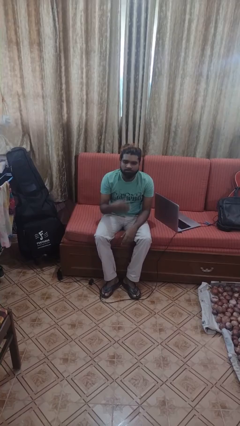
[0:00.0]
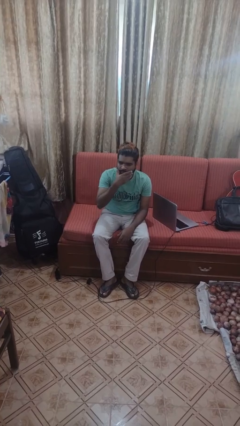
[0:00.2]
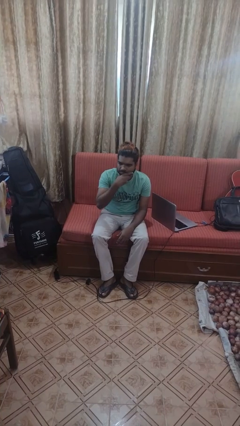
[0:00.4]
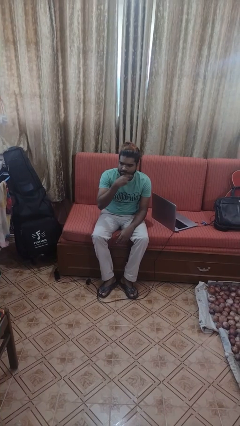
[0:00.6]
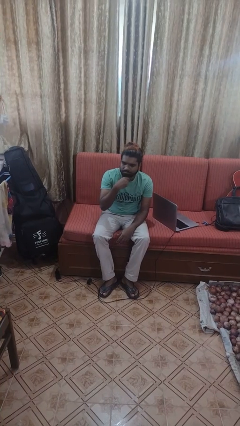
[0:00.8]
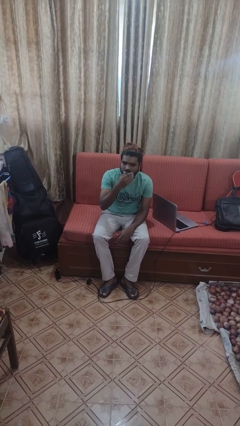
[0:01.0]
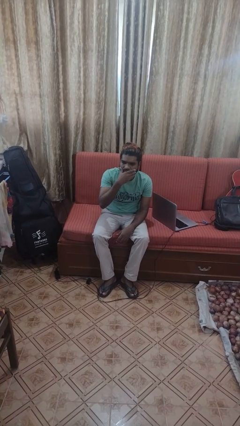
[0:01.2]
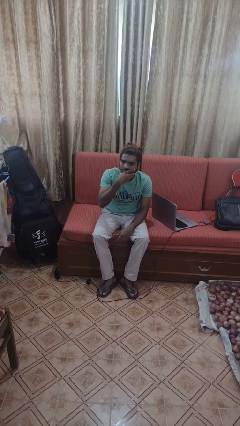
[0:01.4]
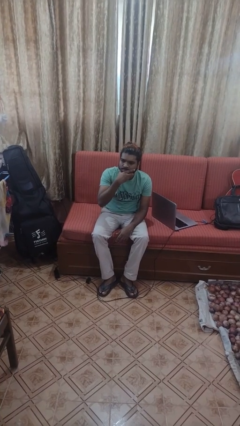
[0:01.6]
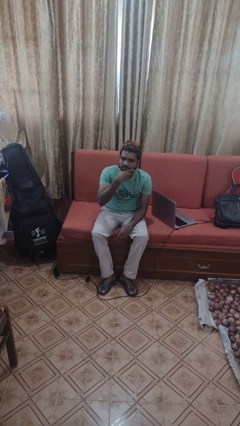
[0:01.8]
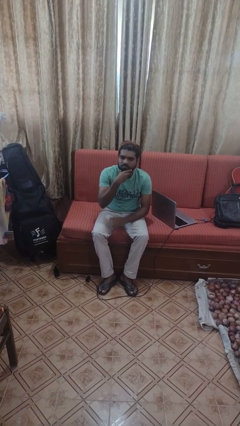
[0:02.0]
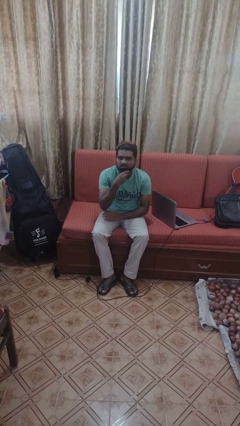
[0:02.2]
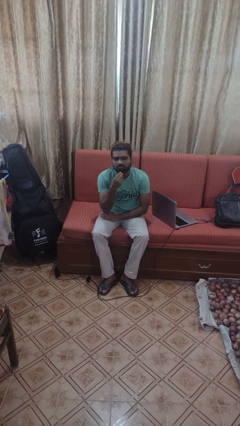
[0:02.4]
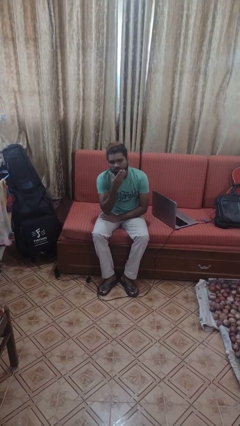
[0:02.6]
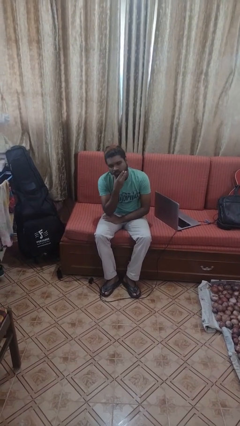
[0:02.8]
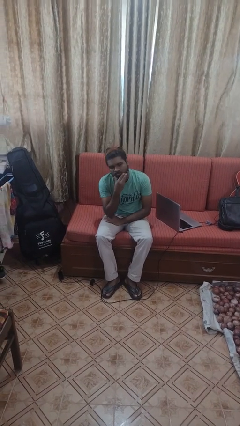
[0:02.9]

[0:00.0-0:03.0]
person strokes chin

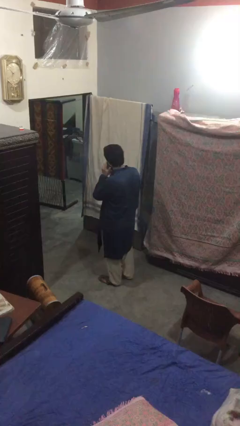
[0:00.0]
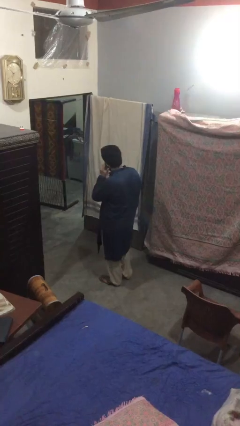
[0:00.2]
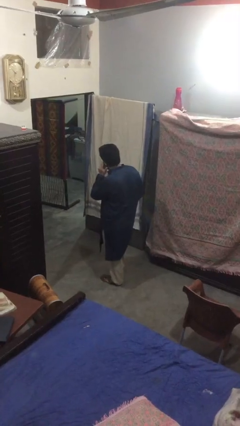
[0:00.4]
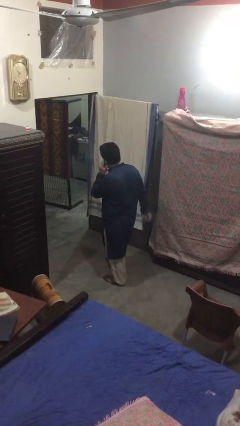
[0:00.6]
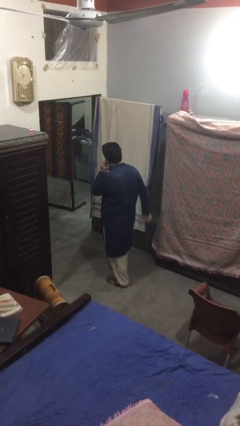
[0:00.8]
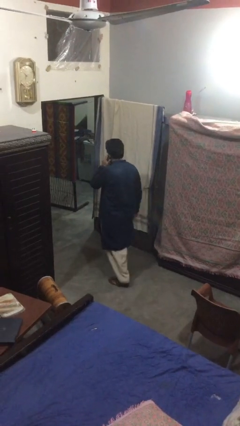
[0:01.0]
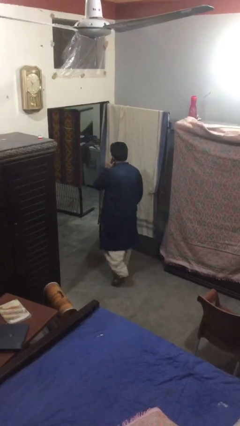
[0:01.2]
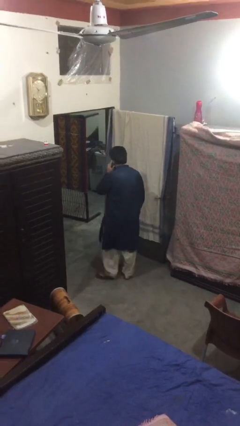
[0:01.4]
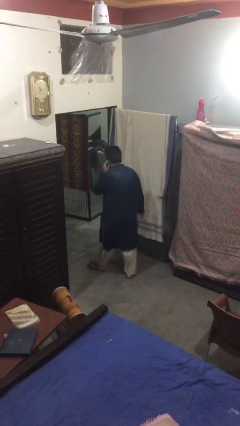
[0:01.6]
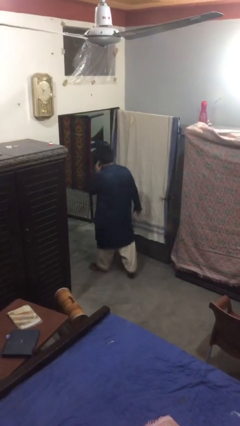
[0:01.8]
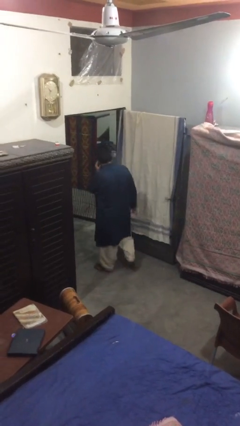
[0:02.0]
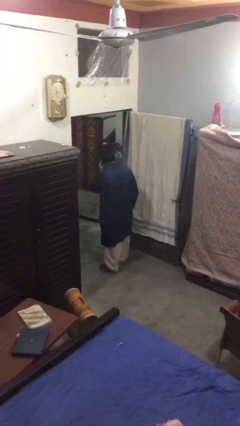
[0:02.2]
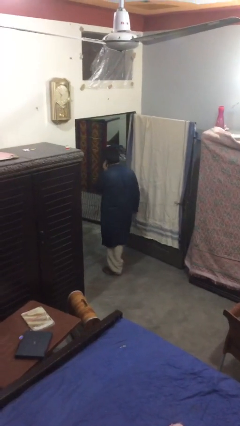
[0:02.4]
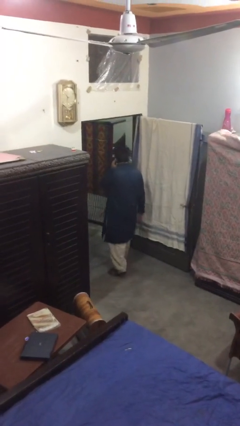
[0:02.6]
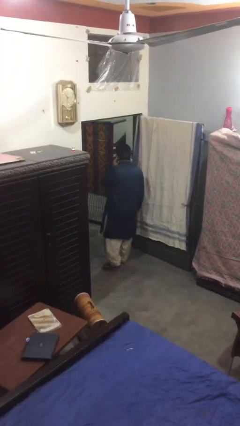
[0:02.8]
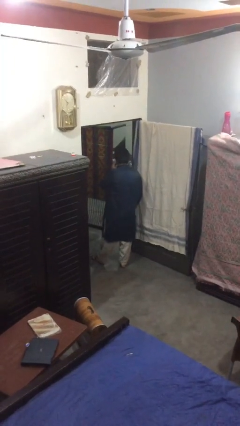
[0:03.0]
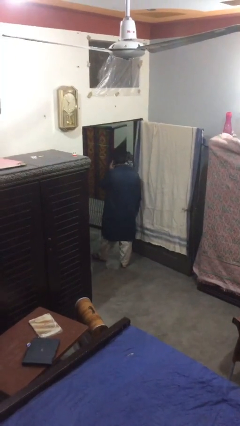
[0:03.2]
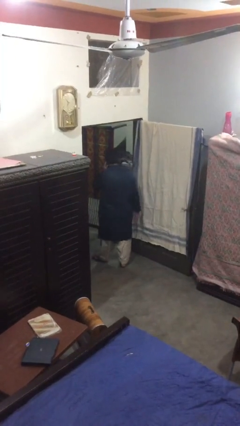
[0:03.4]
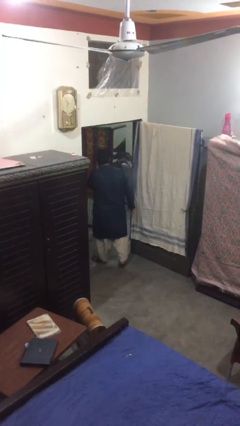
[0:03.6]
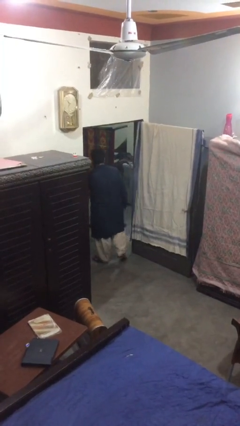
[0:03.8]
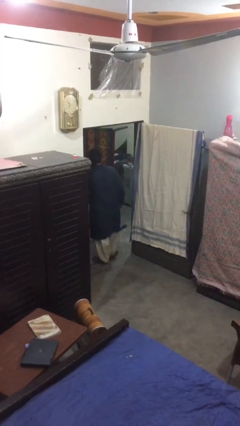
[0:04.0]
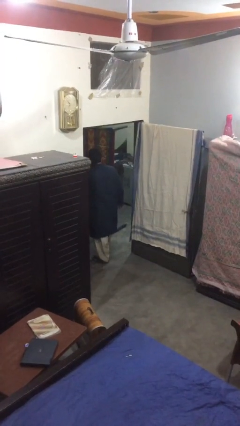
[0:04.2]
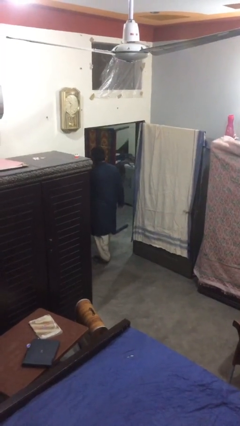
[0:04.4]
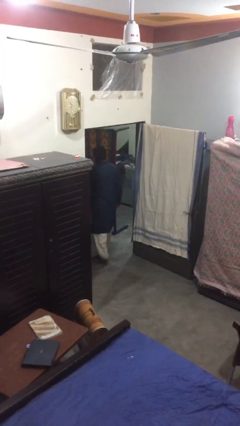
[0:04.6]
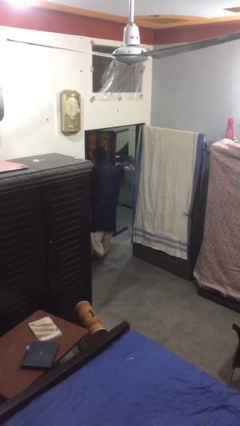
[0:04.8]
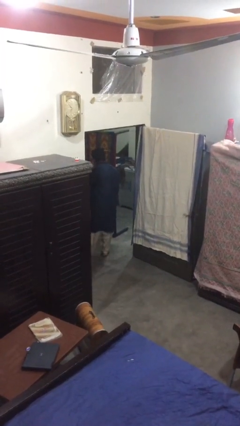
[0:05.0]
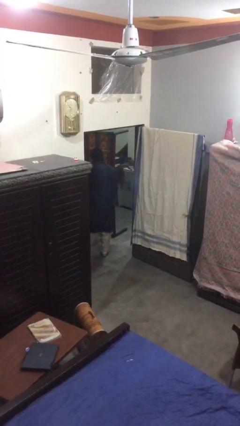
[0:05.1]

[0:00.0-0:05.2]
person exits scene through structure

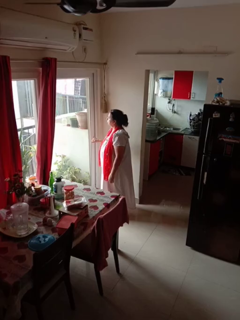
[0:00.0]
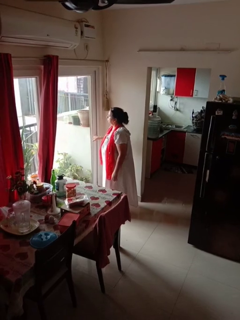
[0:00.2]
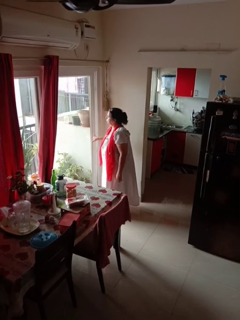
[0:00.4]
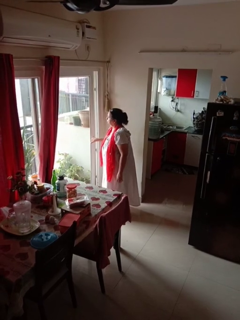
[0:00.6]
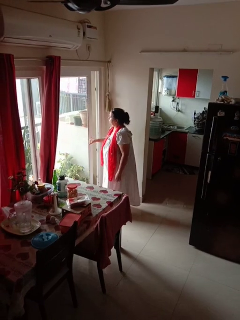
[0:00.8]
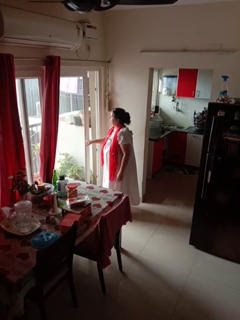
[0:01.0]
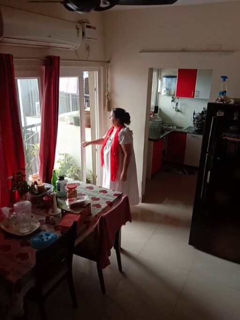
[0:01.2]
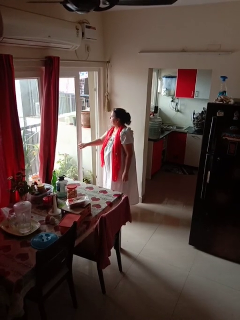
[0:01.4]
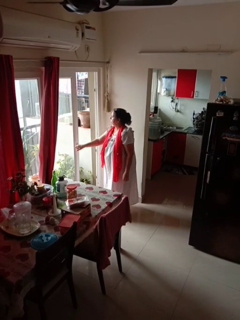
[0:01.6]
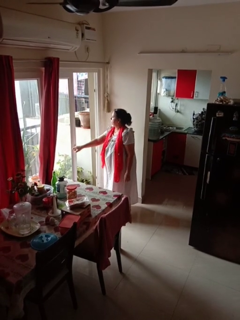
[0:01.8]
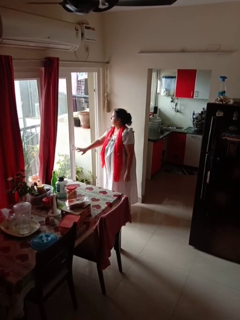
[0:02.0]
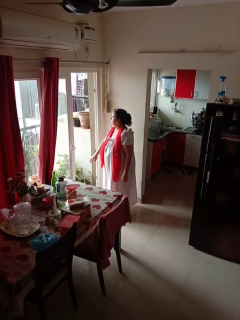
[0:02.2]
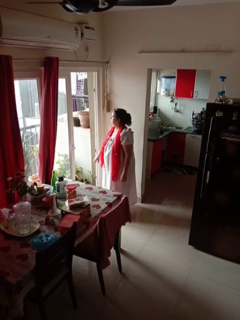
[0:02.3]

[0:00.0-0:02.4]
person opens sliding door

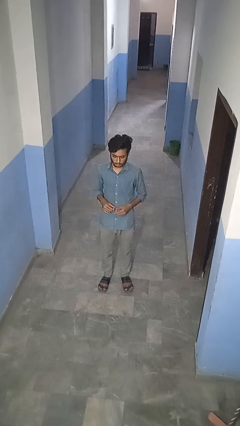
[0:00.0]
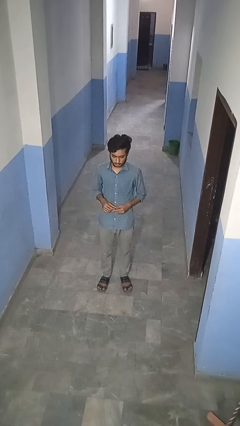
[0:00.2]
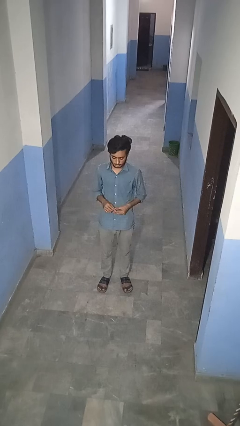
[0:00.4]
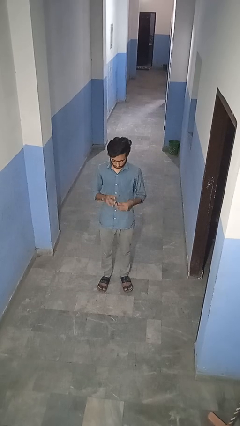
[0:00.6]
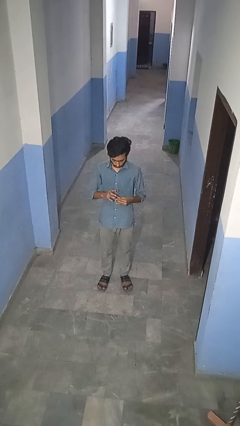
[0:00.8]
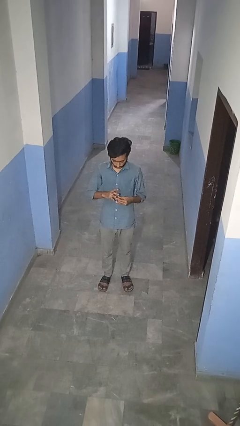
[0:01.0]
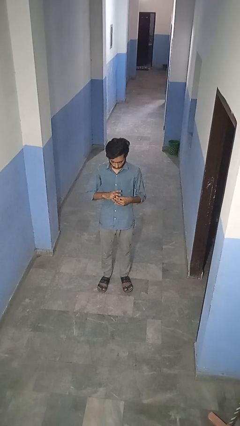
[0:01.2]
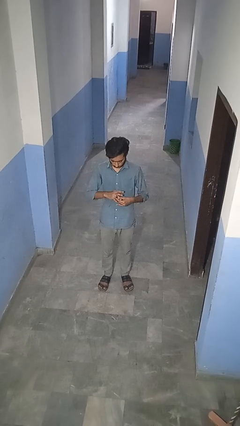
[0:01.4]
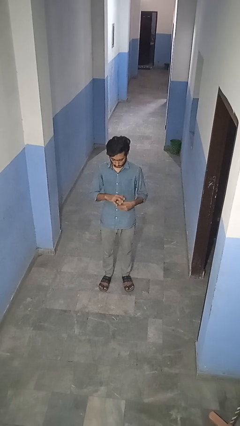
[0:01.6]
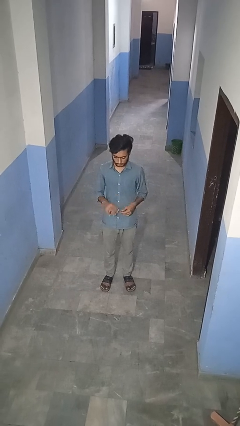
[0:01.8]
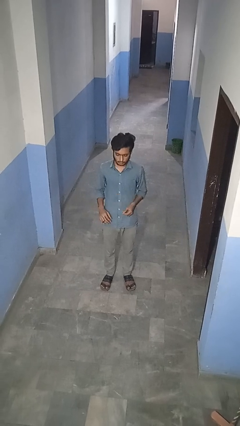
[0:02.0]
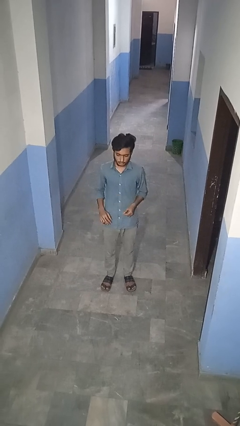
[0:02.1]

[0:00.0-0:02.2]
person puts on ring

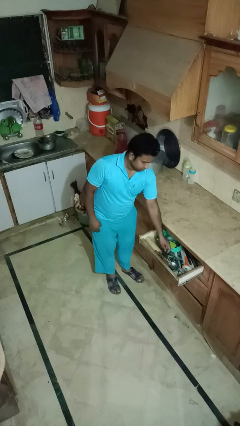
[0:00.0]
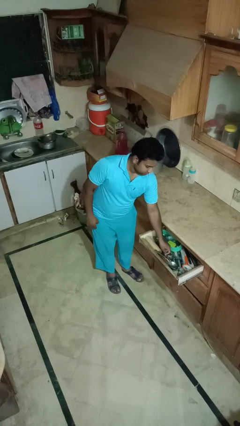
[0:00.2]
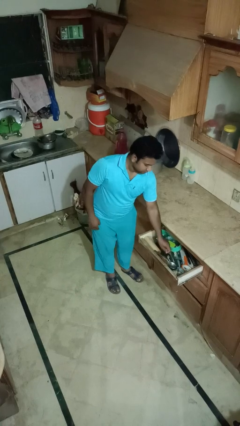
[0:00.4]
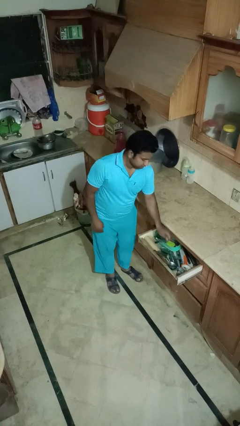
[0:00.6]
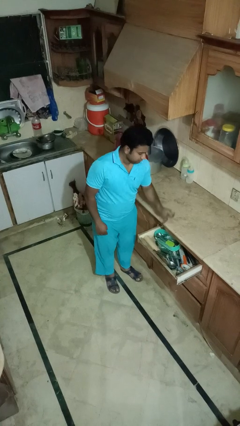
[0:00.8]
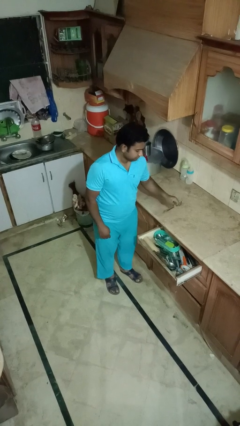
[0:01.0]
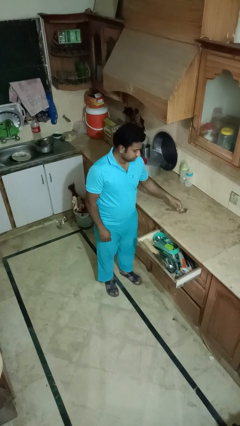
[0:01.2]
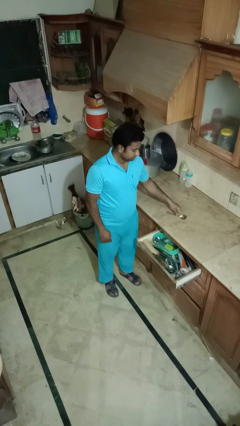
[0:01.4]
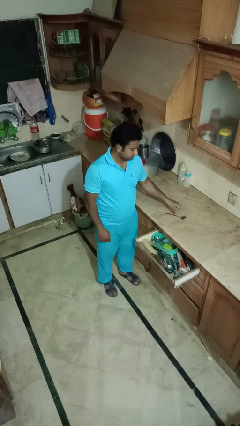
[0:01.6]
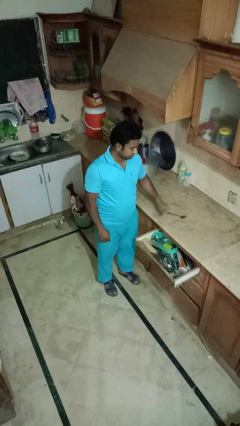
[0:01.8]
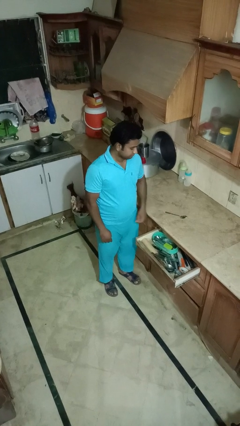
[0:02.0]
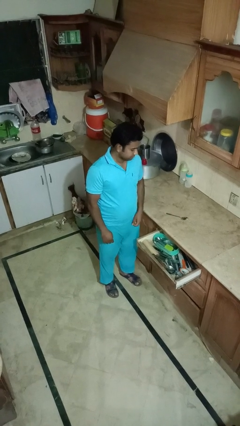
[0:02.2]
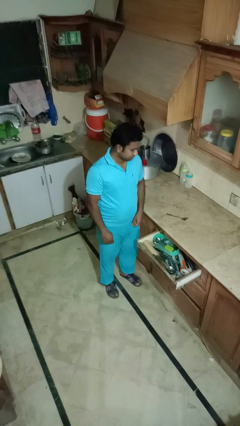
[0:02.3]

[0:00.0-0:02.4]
person takes object from kitchen drawer

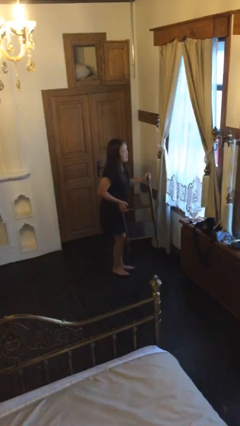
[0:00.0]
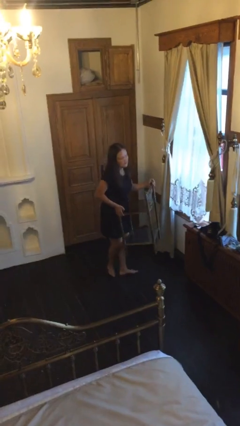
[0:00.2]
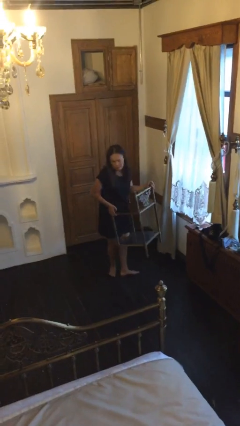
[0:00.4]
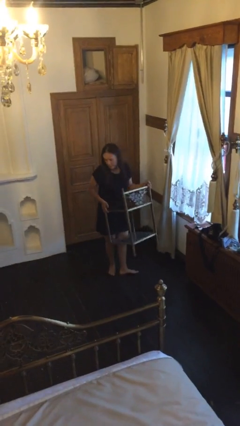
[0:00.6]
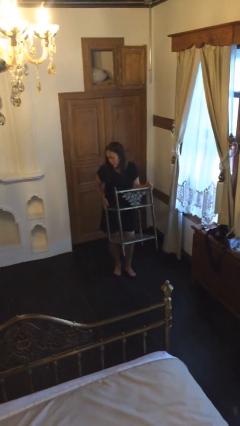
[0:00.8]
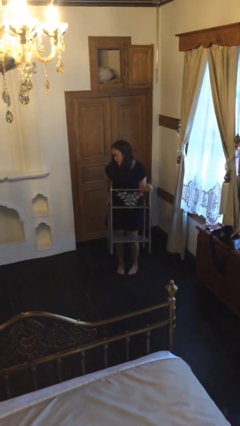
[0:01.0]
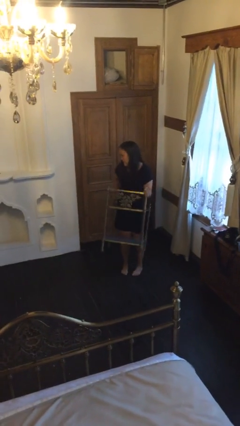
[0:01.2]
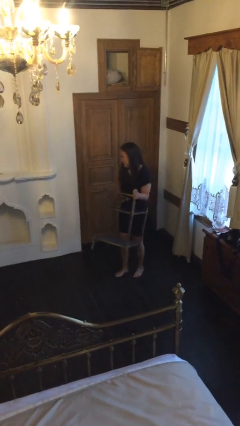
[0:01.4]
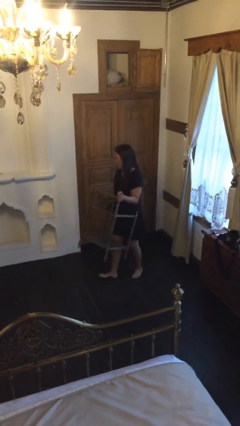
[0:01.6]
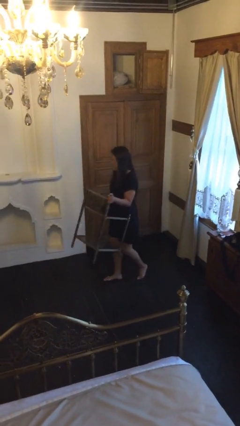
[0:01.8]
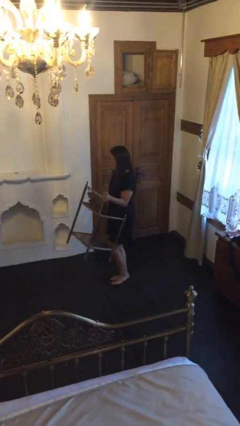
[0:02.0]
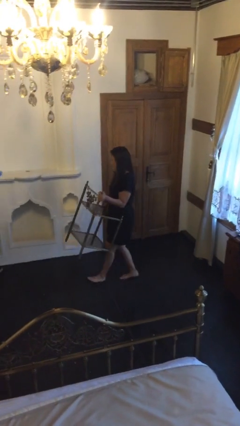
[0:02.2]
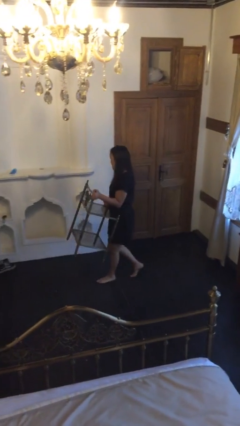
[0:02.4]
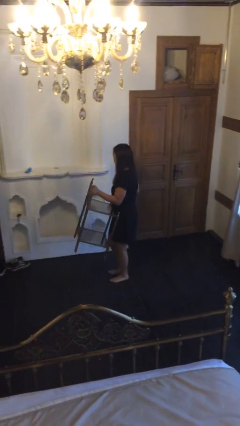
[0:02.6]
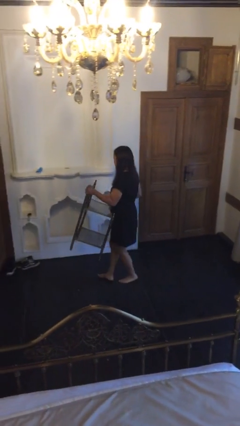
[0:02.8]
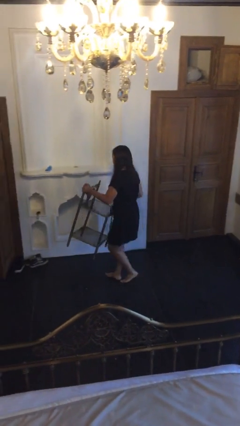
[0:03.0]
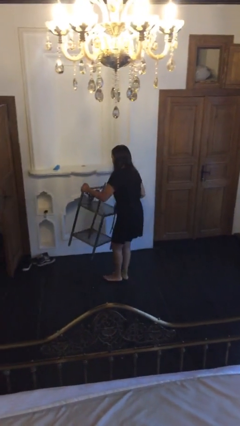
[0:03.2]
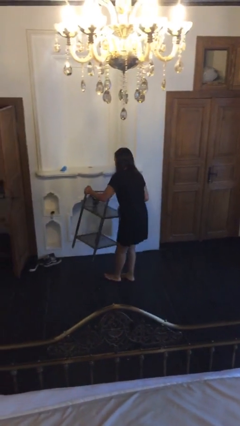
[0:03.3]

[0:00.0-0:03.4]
person carries heavy object
